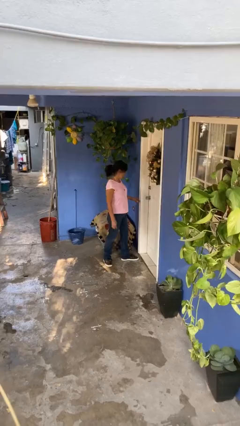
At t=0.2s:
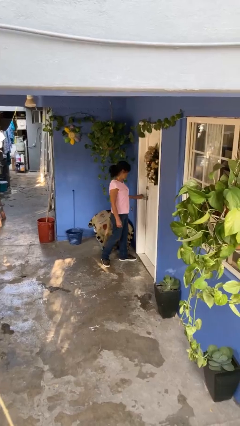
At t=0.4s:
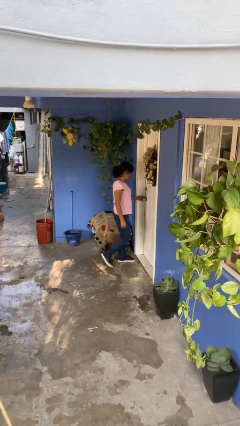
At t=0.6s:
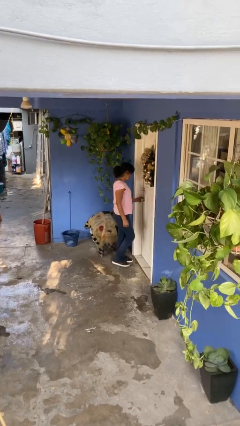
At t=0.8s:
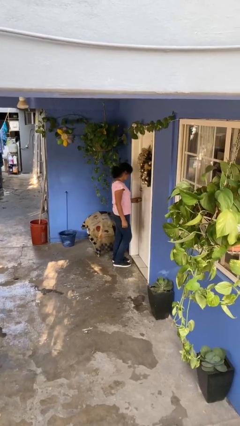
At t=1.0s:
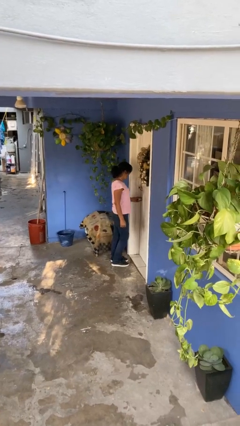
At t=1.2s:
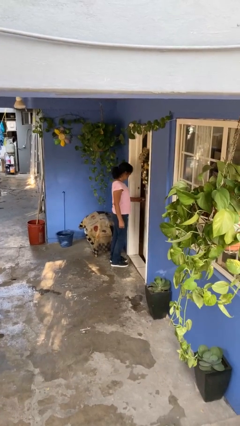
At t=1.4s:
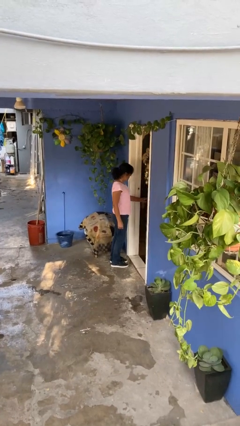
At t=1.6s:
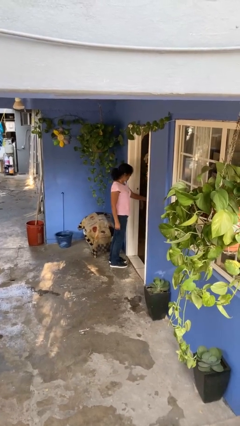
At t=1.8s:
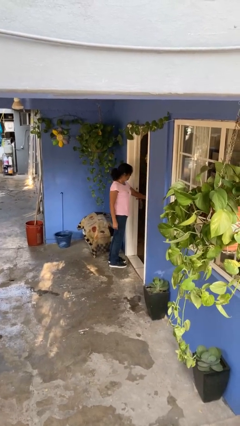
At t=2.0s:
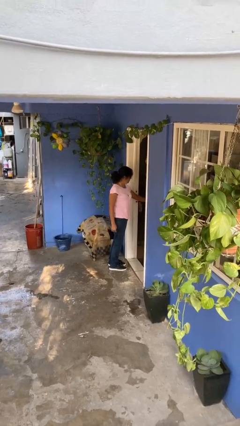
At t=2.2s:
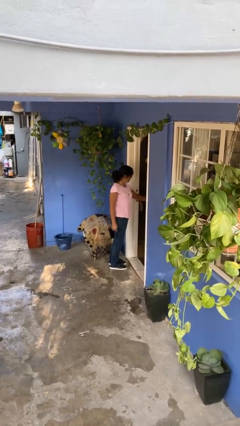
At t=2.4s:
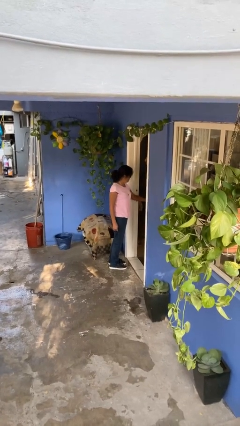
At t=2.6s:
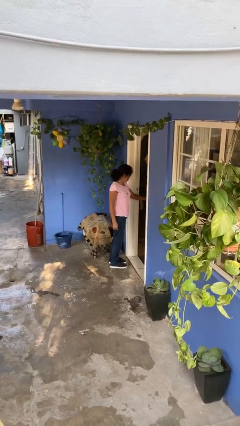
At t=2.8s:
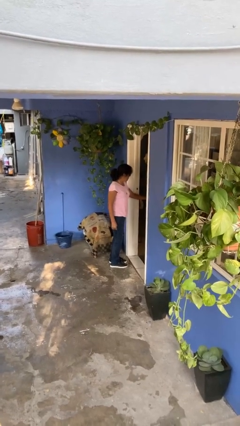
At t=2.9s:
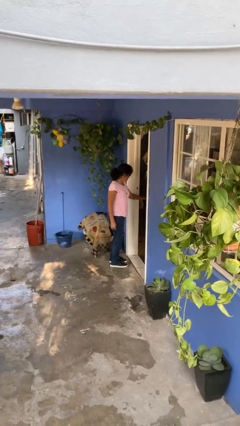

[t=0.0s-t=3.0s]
person opens facility door

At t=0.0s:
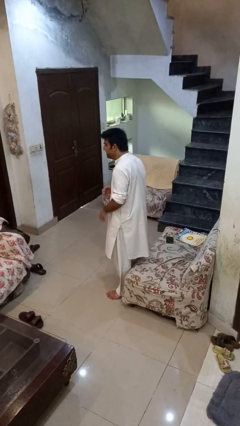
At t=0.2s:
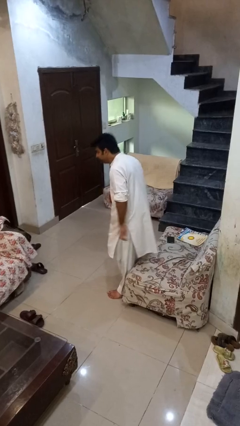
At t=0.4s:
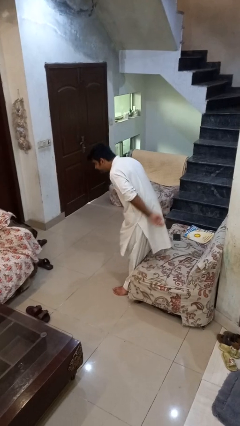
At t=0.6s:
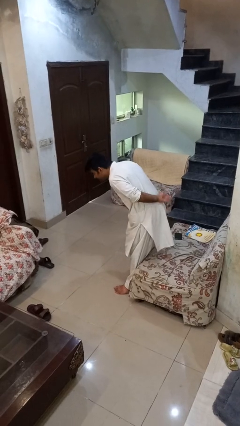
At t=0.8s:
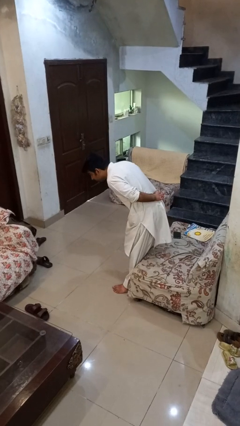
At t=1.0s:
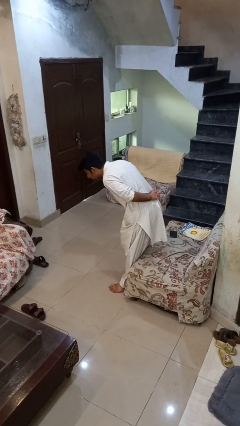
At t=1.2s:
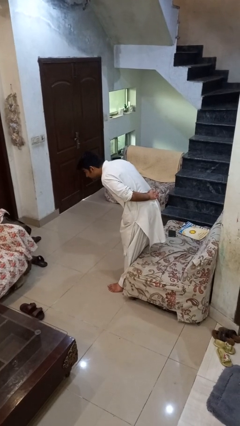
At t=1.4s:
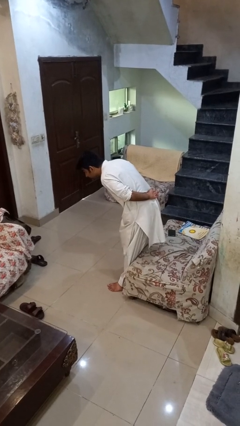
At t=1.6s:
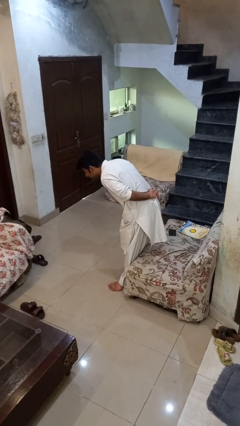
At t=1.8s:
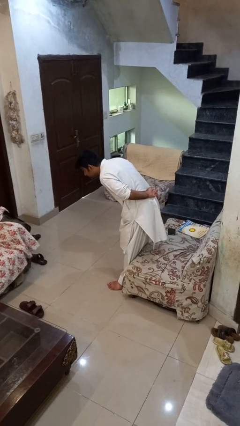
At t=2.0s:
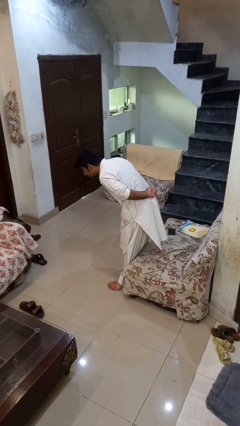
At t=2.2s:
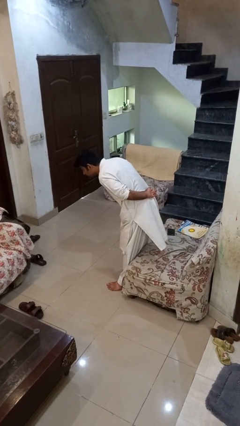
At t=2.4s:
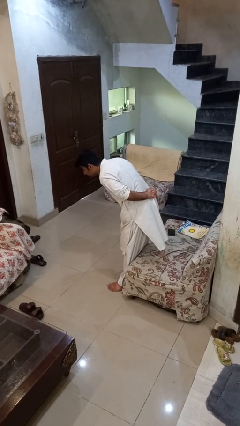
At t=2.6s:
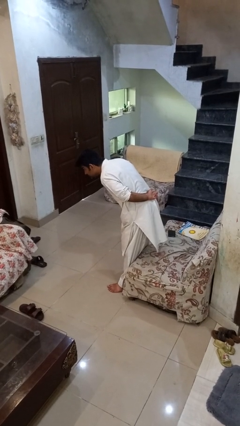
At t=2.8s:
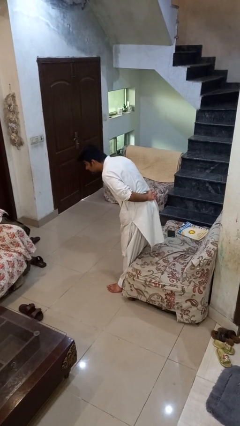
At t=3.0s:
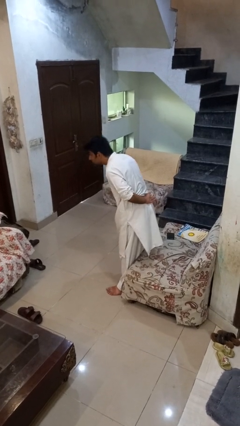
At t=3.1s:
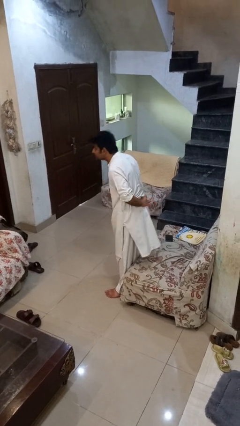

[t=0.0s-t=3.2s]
person bows

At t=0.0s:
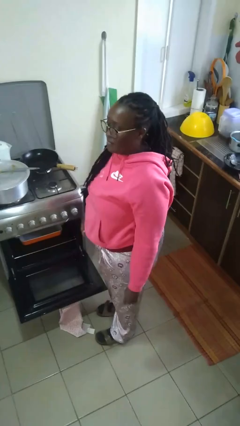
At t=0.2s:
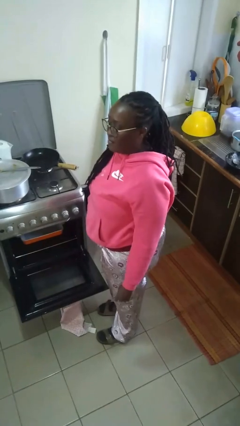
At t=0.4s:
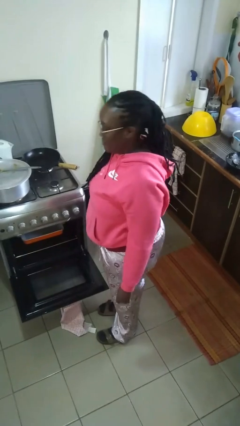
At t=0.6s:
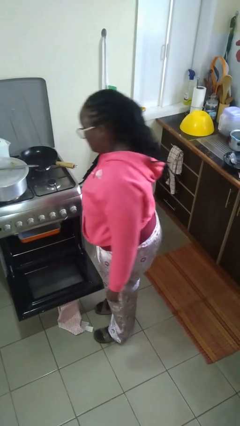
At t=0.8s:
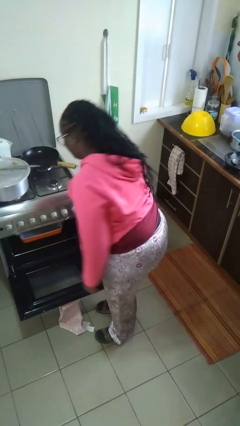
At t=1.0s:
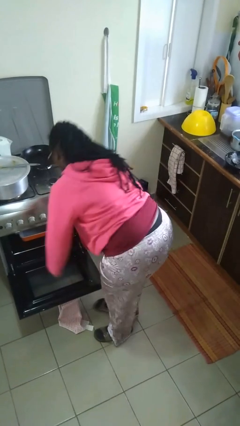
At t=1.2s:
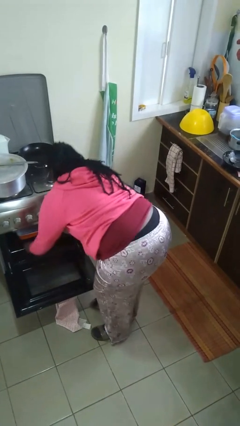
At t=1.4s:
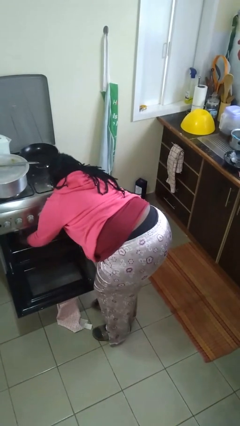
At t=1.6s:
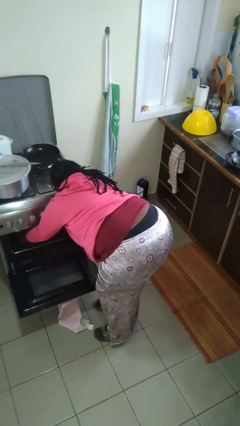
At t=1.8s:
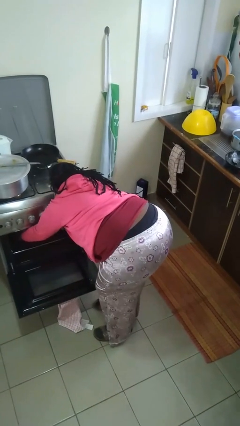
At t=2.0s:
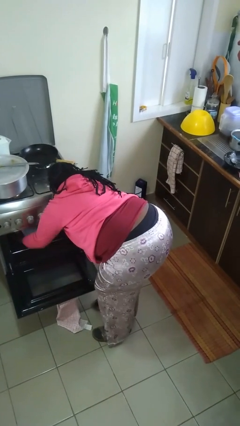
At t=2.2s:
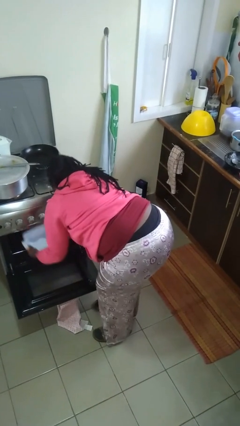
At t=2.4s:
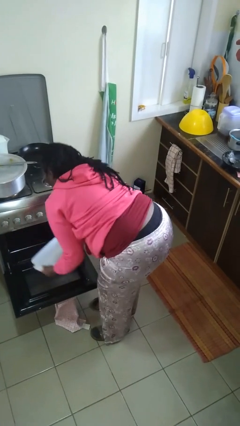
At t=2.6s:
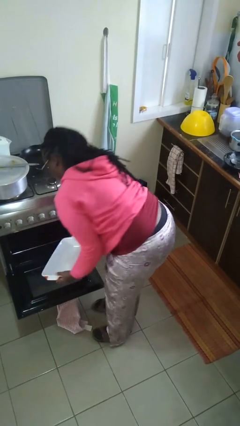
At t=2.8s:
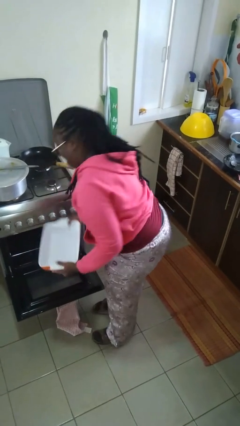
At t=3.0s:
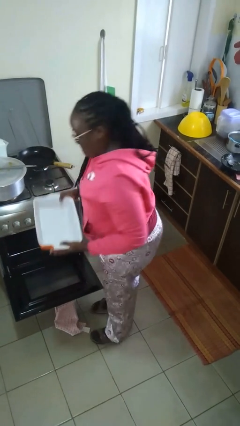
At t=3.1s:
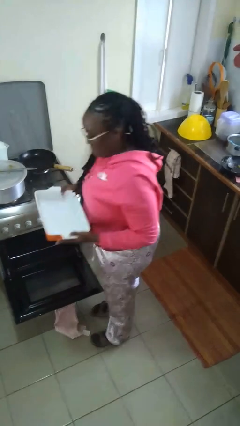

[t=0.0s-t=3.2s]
person takes object from oven

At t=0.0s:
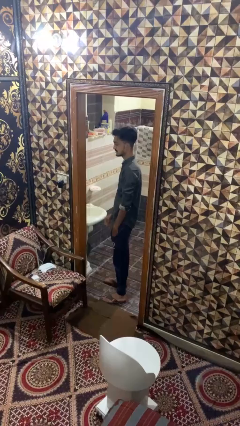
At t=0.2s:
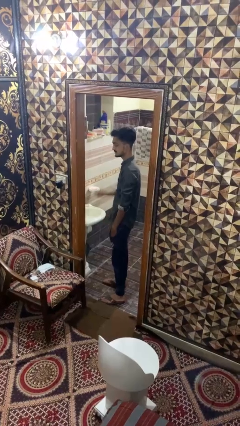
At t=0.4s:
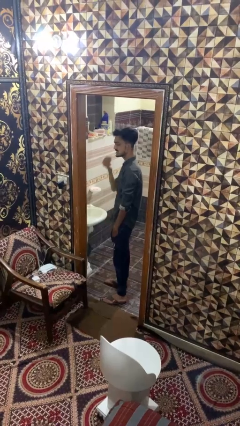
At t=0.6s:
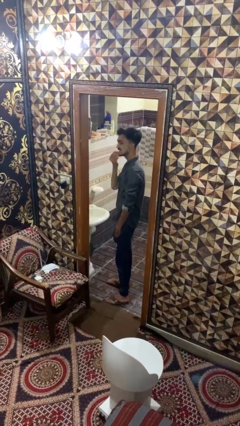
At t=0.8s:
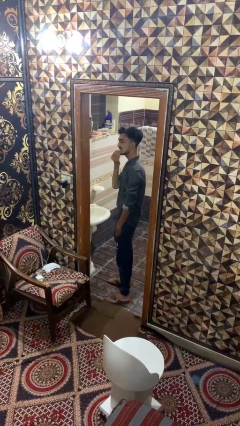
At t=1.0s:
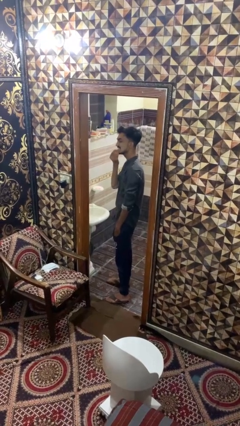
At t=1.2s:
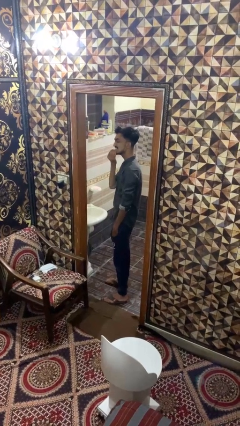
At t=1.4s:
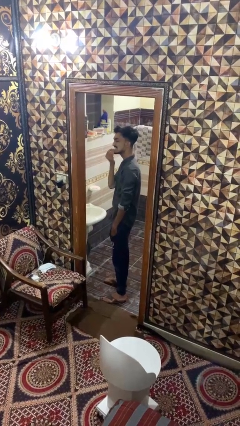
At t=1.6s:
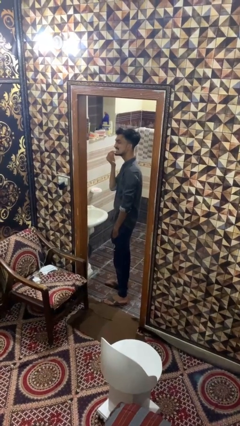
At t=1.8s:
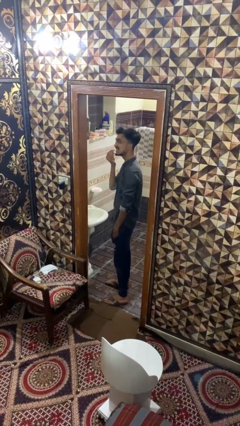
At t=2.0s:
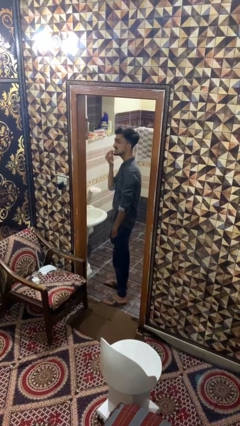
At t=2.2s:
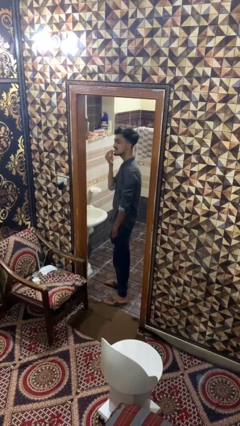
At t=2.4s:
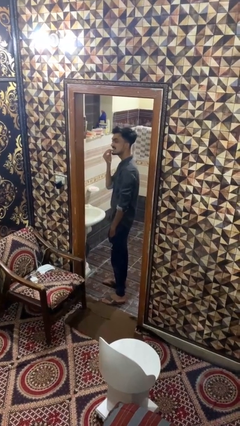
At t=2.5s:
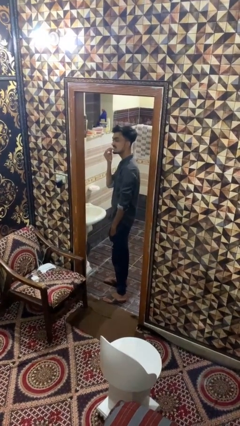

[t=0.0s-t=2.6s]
person flosses

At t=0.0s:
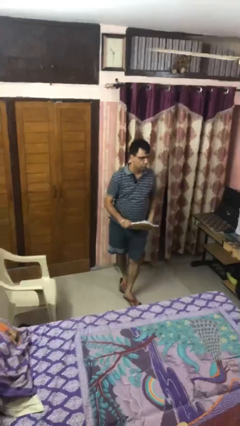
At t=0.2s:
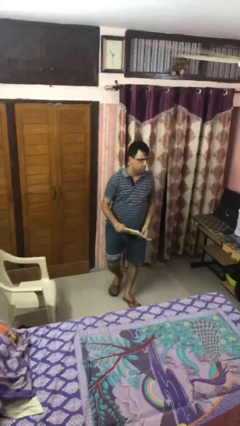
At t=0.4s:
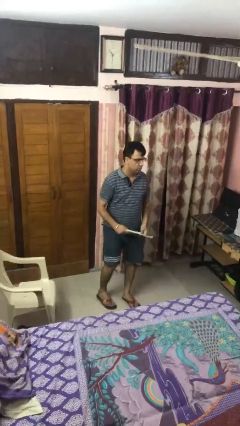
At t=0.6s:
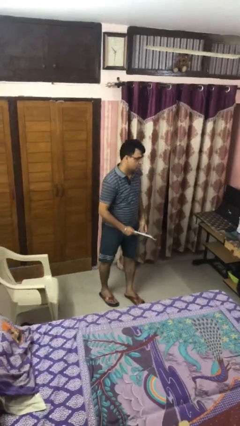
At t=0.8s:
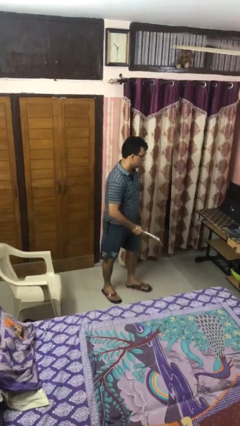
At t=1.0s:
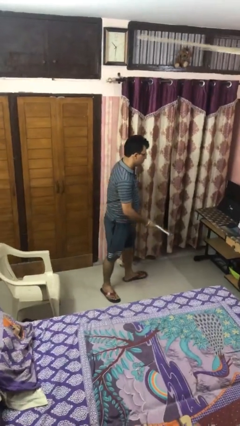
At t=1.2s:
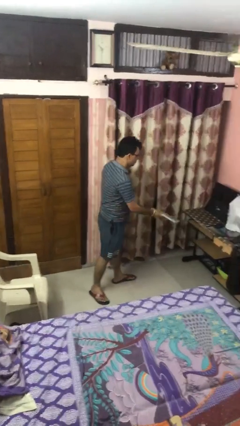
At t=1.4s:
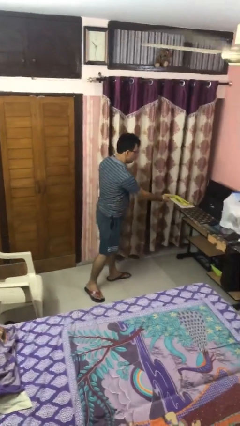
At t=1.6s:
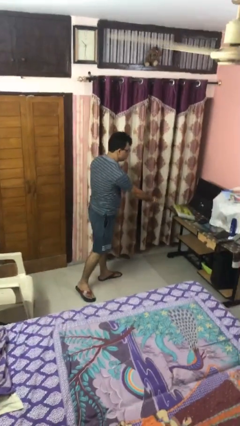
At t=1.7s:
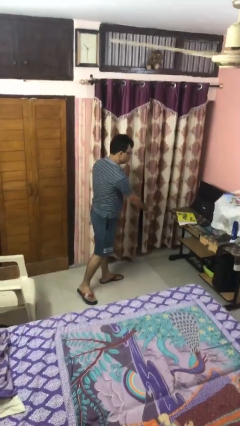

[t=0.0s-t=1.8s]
person throws object on table

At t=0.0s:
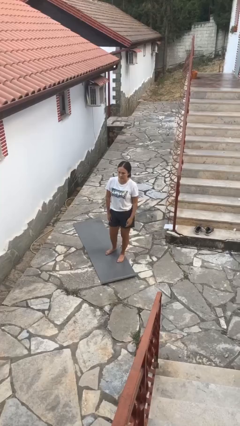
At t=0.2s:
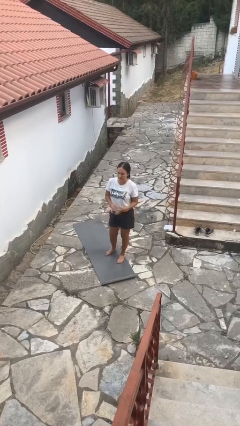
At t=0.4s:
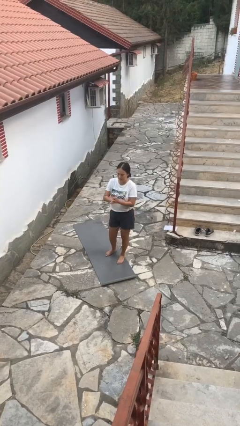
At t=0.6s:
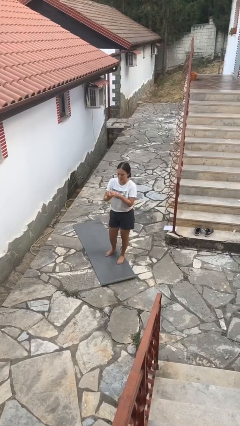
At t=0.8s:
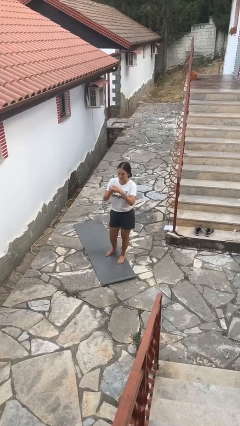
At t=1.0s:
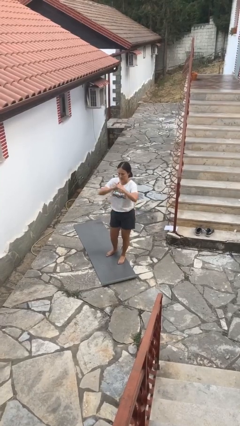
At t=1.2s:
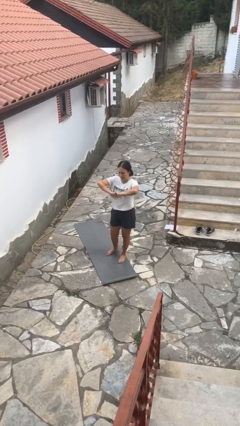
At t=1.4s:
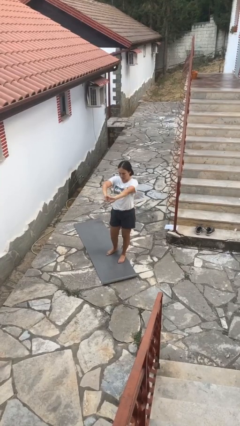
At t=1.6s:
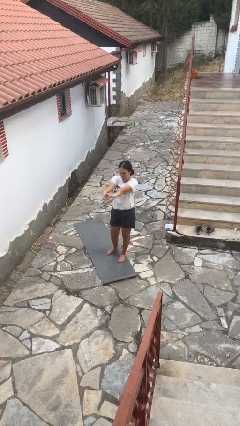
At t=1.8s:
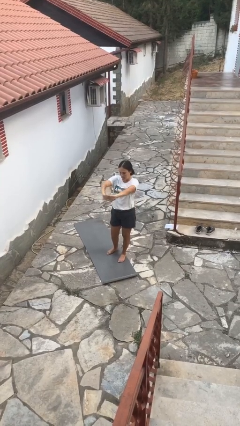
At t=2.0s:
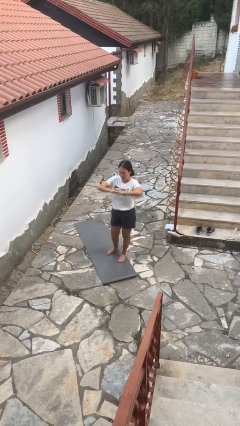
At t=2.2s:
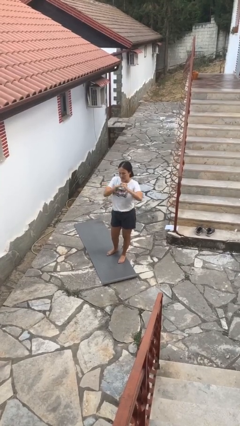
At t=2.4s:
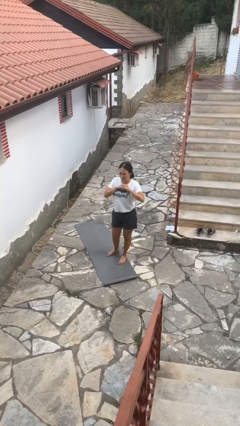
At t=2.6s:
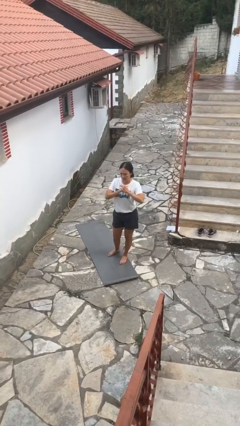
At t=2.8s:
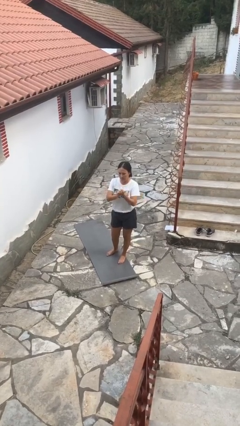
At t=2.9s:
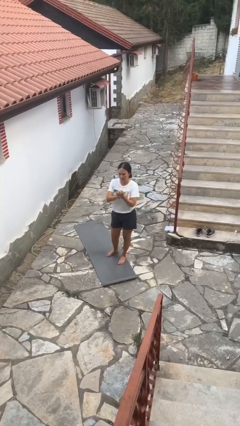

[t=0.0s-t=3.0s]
person cracks knuckles

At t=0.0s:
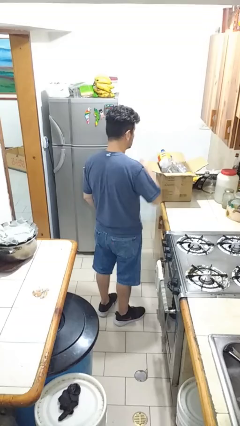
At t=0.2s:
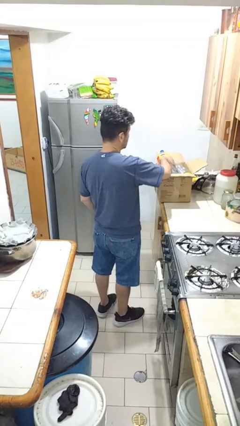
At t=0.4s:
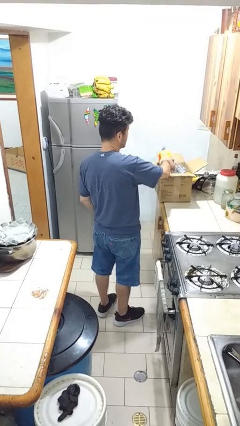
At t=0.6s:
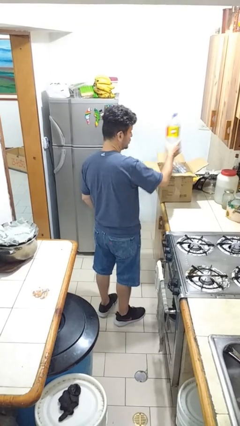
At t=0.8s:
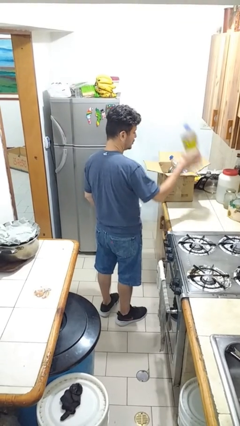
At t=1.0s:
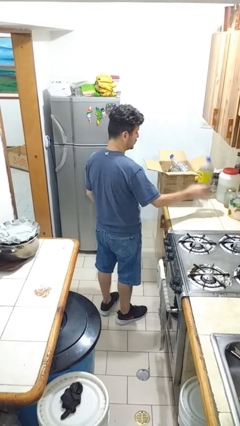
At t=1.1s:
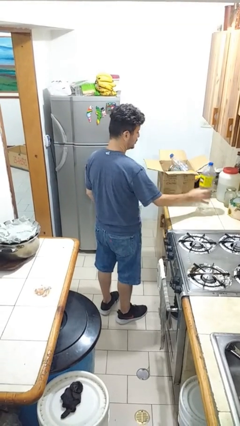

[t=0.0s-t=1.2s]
person takes object from box
